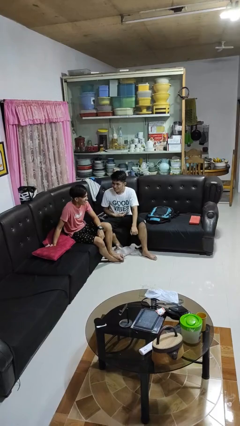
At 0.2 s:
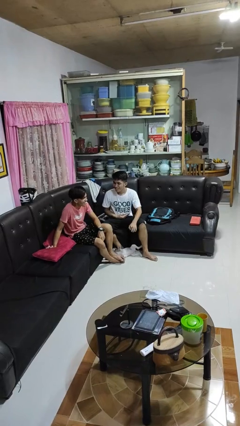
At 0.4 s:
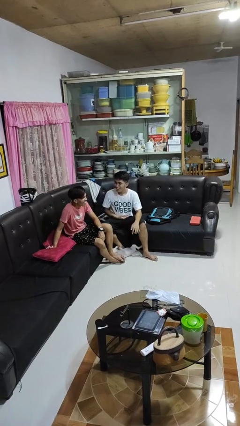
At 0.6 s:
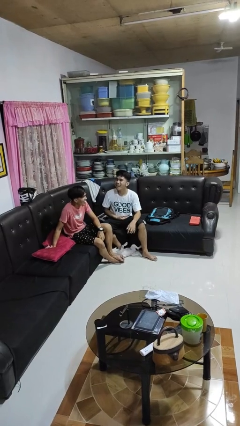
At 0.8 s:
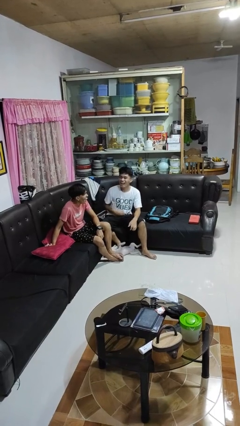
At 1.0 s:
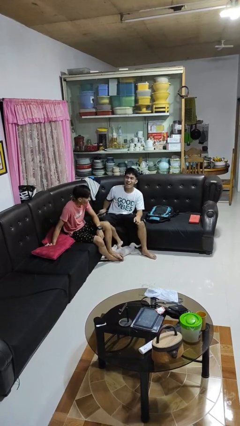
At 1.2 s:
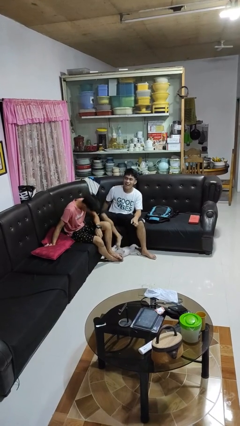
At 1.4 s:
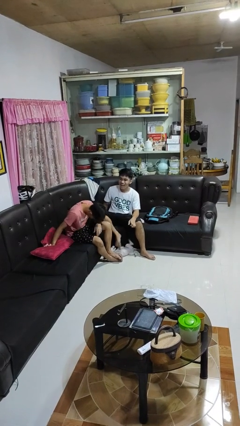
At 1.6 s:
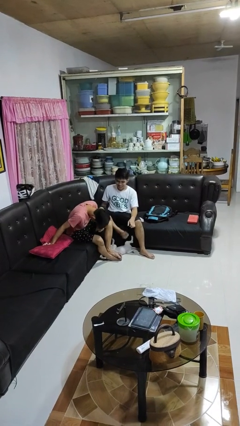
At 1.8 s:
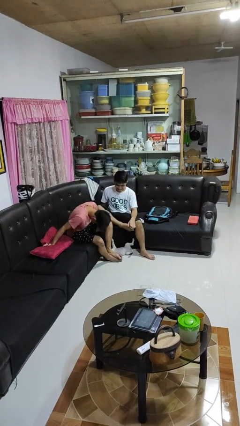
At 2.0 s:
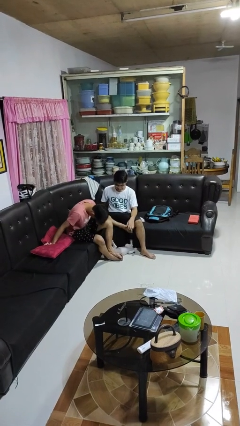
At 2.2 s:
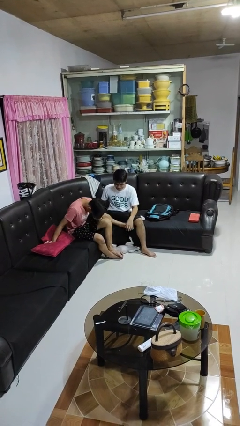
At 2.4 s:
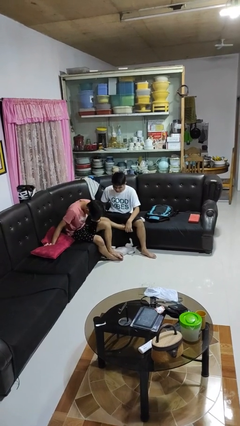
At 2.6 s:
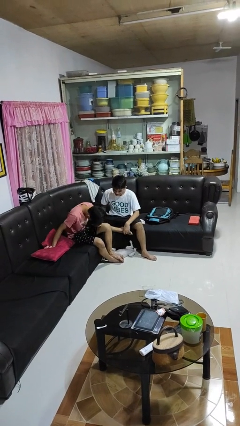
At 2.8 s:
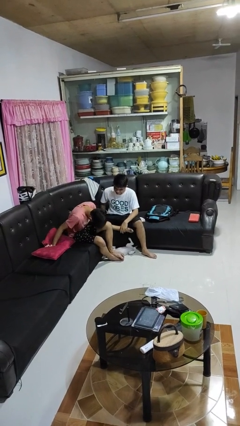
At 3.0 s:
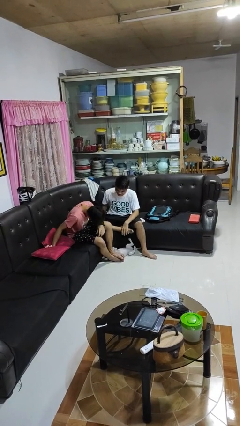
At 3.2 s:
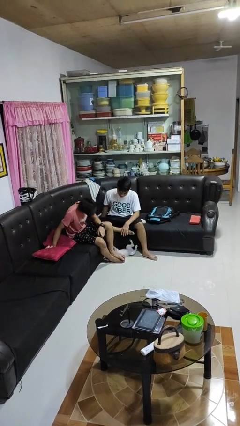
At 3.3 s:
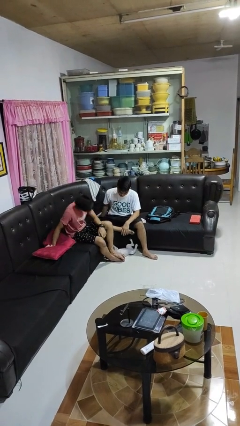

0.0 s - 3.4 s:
person laughs with person

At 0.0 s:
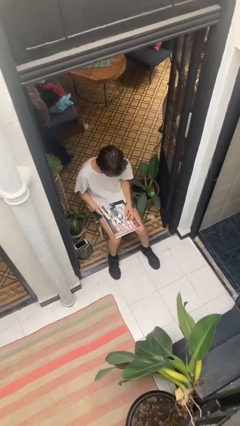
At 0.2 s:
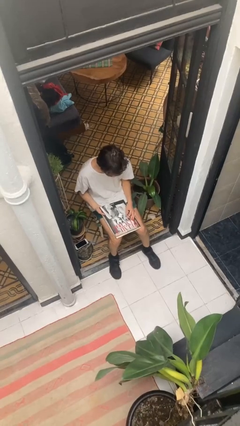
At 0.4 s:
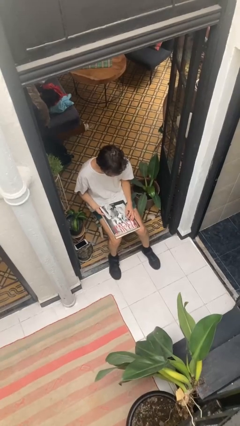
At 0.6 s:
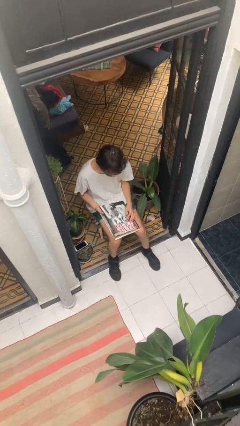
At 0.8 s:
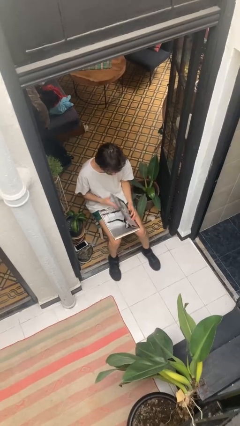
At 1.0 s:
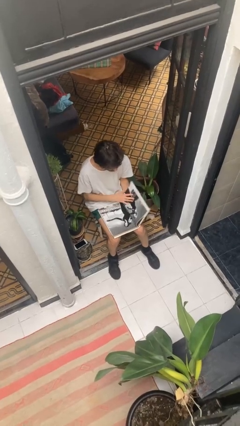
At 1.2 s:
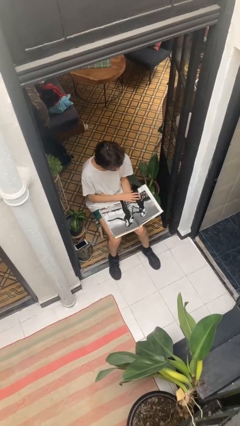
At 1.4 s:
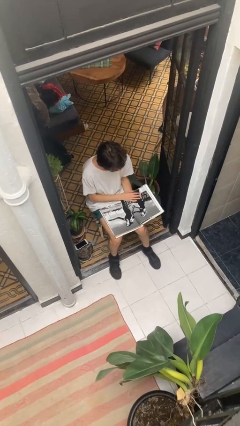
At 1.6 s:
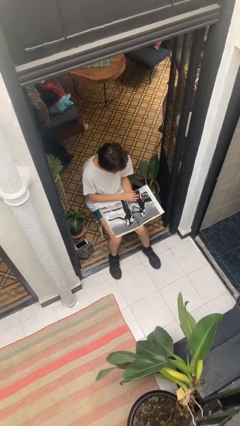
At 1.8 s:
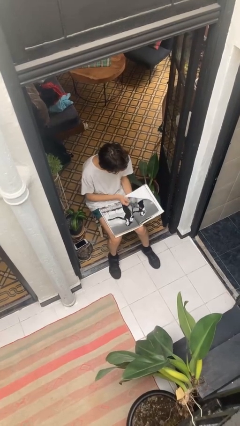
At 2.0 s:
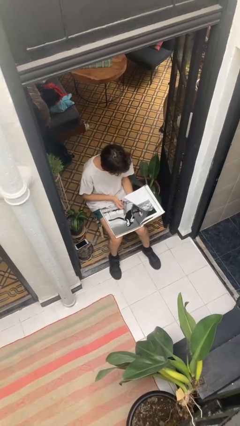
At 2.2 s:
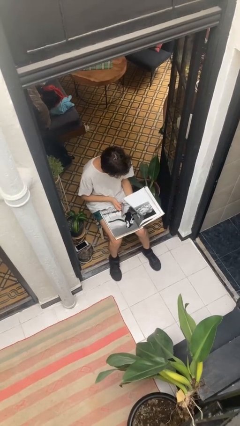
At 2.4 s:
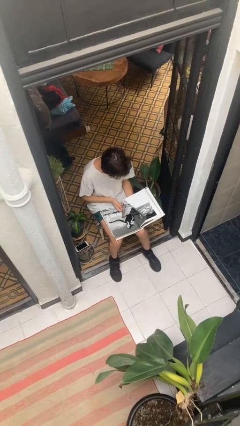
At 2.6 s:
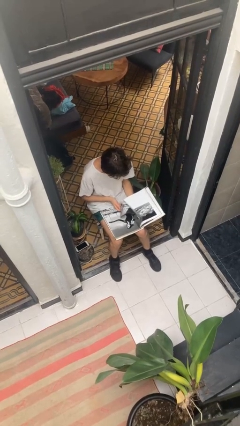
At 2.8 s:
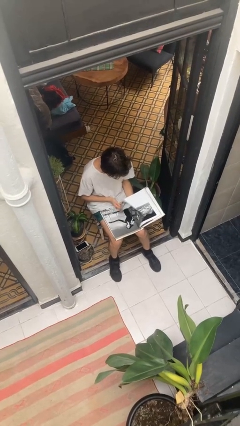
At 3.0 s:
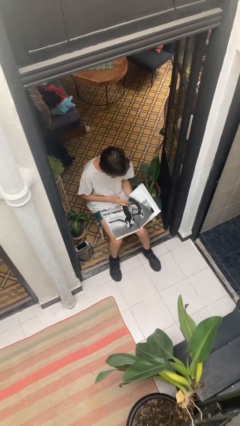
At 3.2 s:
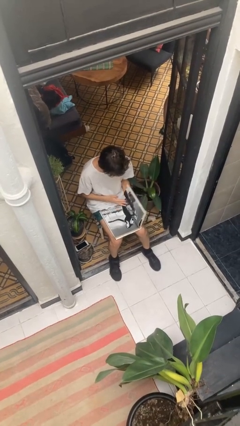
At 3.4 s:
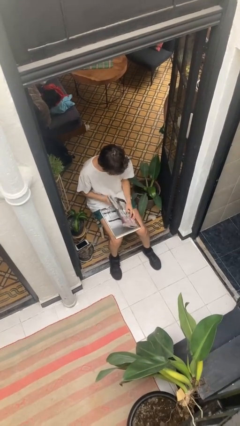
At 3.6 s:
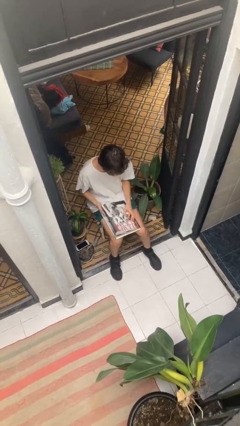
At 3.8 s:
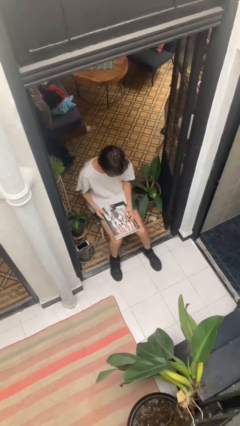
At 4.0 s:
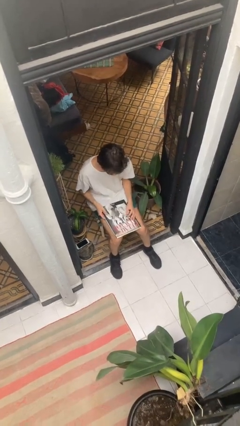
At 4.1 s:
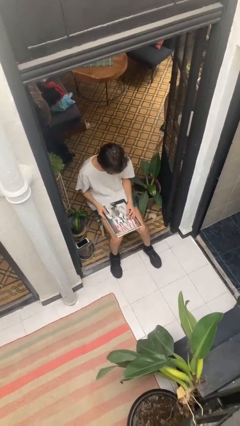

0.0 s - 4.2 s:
person reads document

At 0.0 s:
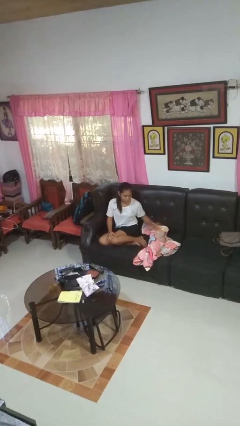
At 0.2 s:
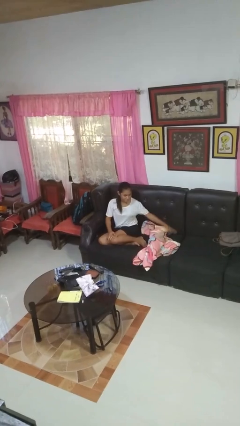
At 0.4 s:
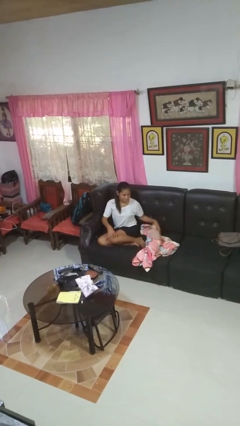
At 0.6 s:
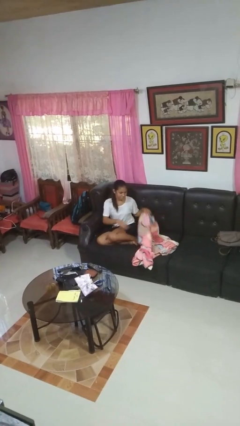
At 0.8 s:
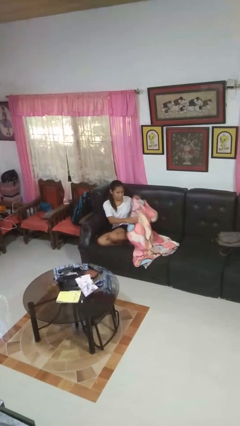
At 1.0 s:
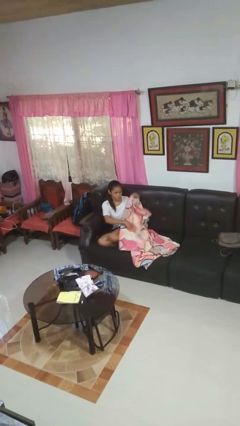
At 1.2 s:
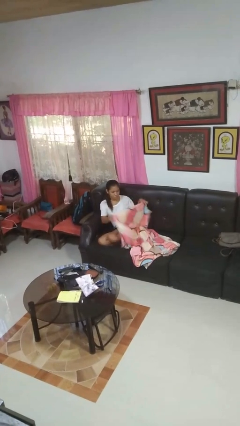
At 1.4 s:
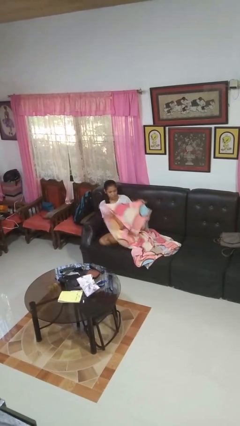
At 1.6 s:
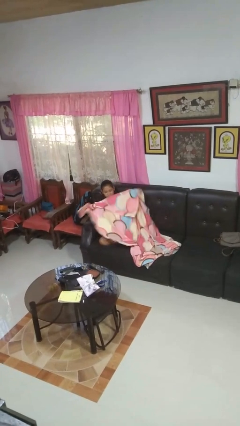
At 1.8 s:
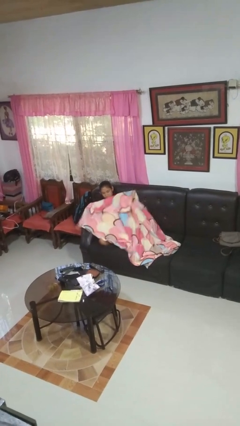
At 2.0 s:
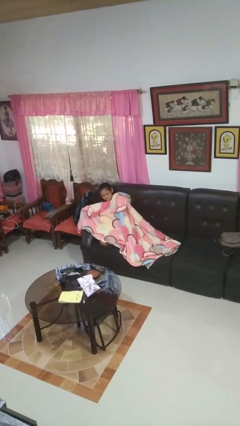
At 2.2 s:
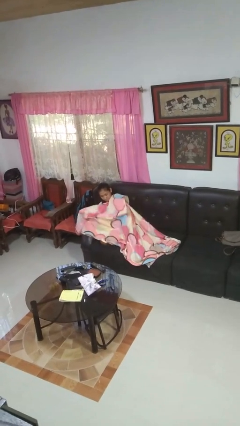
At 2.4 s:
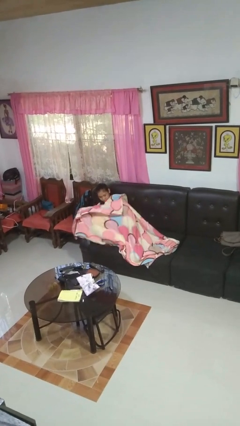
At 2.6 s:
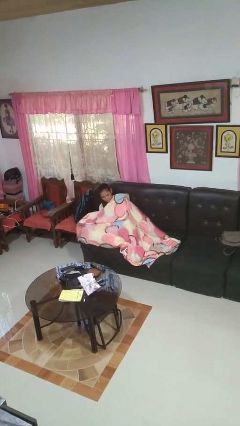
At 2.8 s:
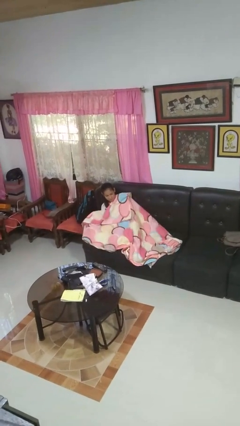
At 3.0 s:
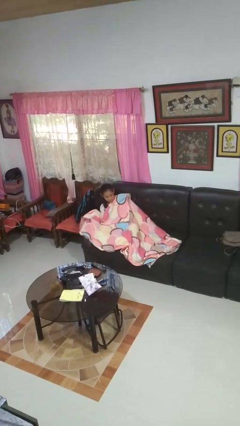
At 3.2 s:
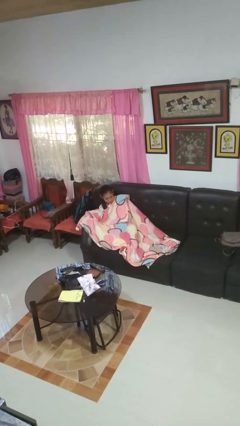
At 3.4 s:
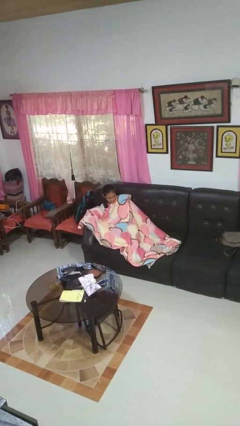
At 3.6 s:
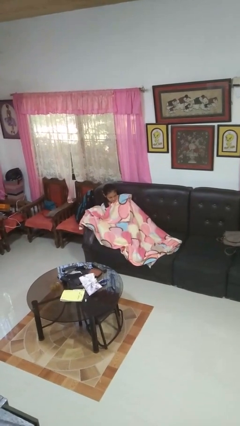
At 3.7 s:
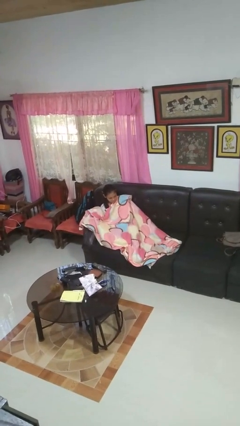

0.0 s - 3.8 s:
person covers with blanket

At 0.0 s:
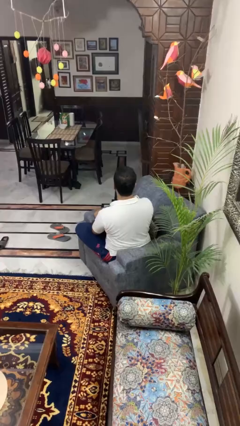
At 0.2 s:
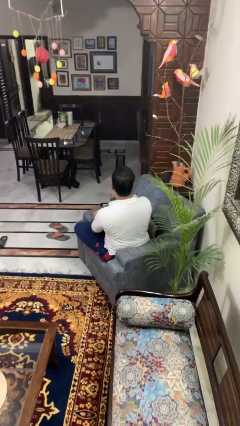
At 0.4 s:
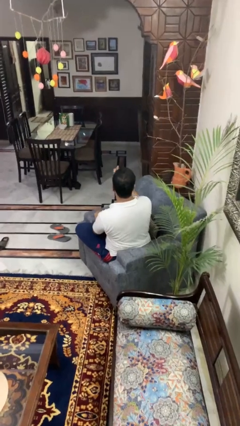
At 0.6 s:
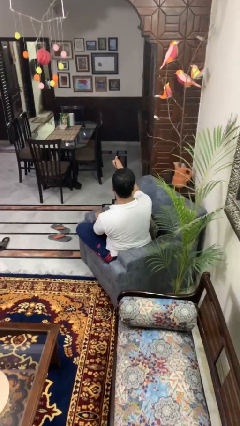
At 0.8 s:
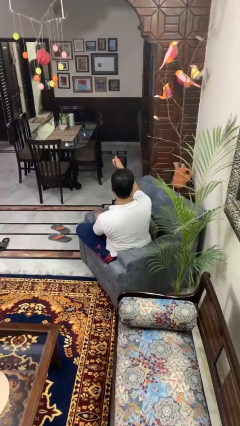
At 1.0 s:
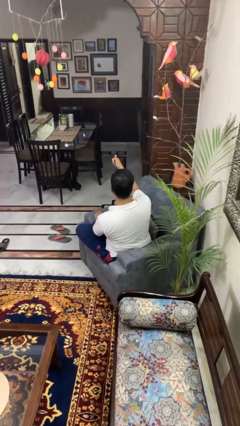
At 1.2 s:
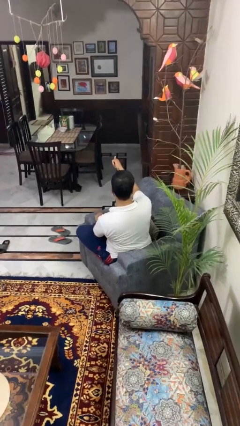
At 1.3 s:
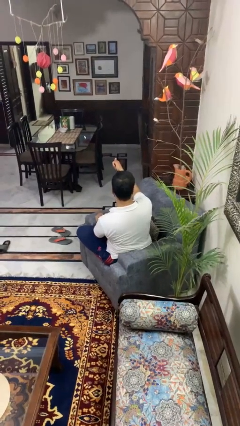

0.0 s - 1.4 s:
person gestures thumbs up

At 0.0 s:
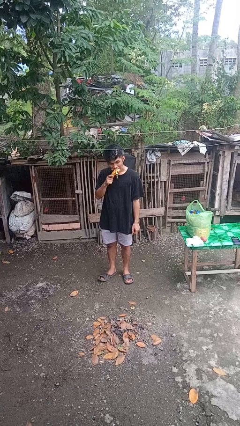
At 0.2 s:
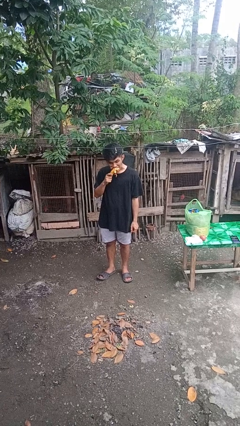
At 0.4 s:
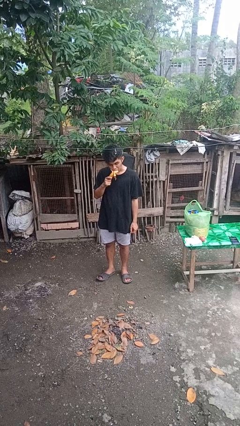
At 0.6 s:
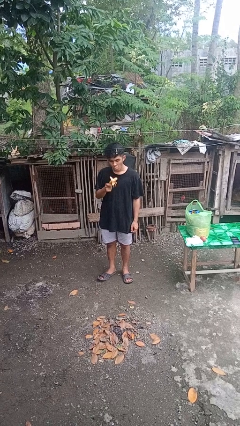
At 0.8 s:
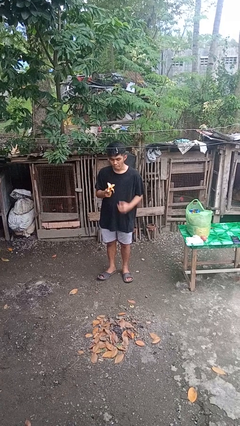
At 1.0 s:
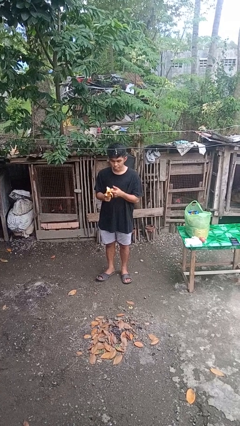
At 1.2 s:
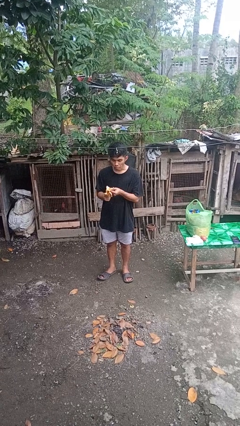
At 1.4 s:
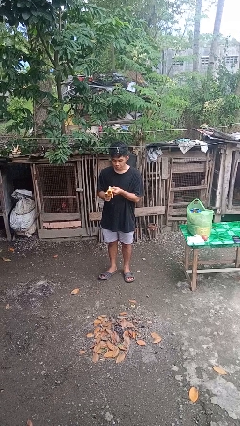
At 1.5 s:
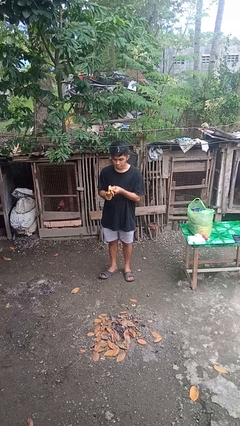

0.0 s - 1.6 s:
person eats banana

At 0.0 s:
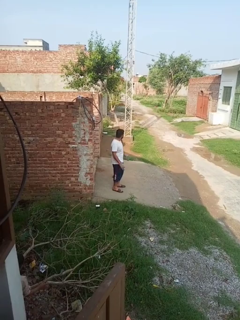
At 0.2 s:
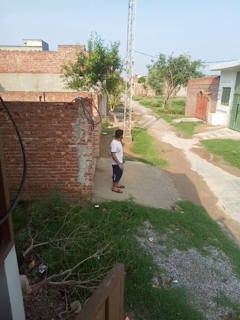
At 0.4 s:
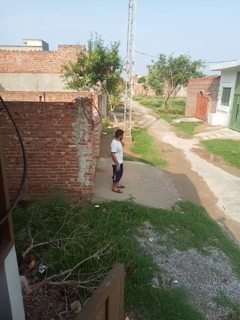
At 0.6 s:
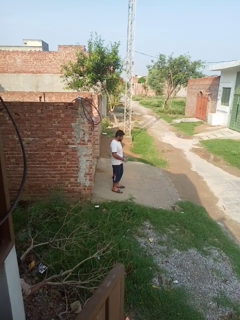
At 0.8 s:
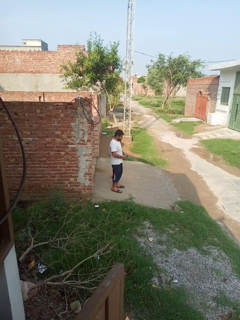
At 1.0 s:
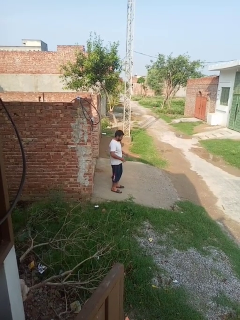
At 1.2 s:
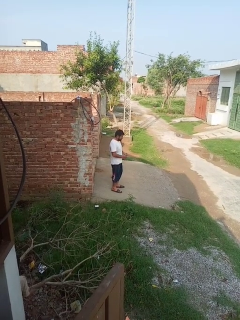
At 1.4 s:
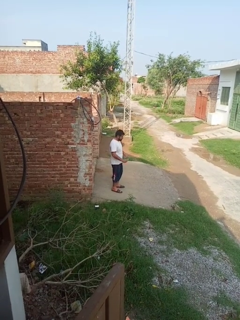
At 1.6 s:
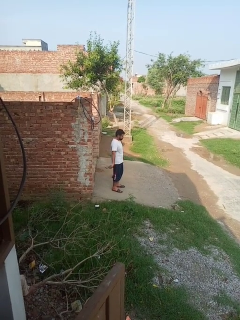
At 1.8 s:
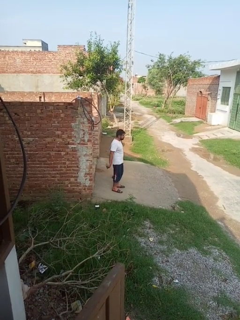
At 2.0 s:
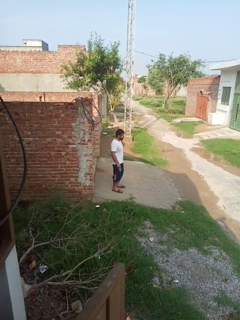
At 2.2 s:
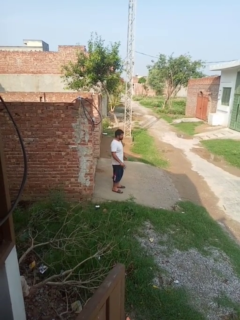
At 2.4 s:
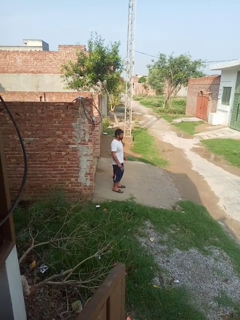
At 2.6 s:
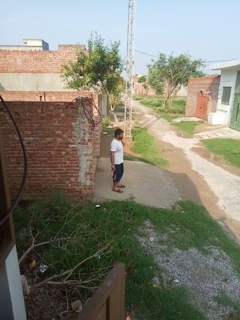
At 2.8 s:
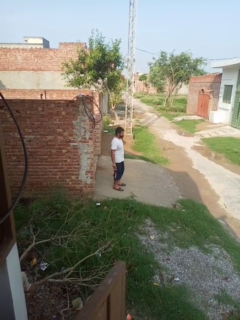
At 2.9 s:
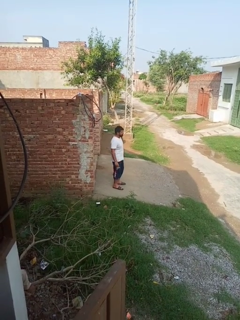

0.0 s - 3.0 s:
person takes off gloves

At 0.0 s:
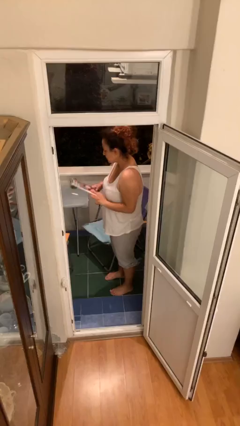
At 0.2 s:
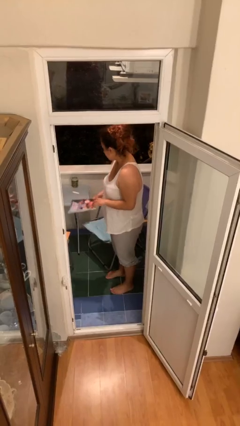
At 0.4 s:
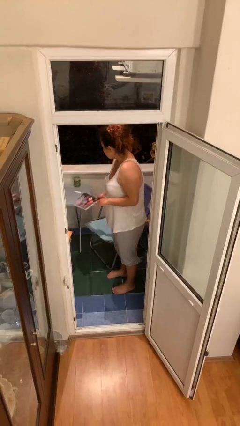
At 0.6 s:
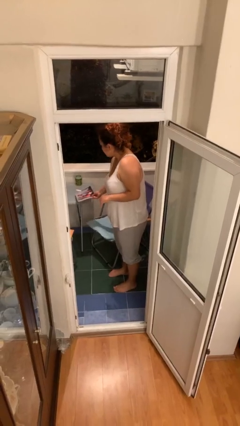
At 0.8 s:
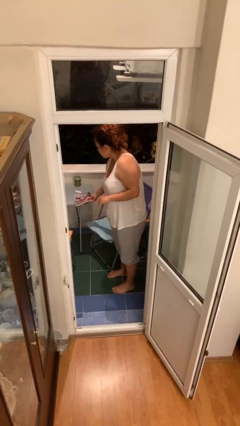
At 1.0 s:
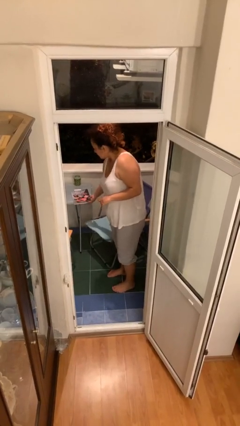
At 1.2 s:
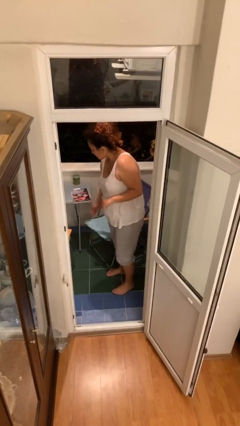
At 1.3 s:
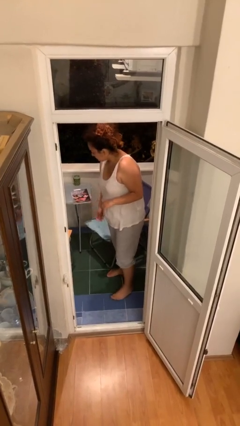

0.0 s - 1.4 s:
person puts down object on table
